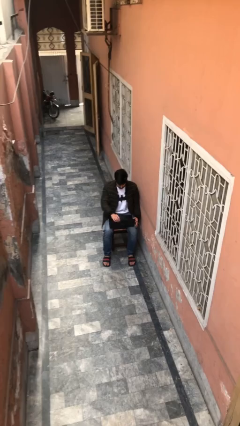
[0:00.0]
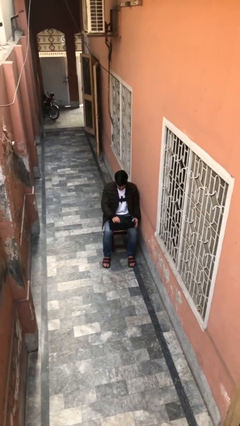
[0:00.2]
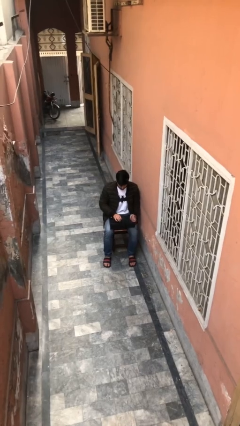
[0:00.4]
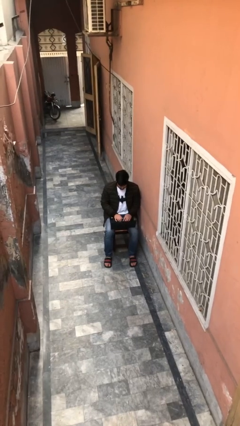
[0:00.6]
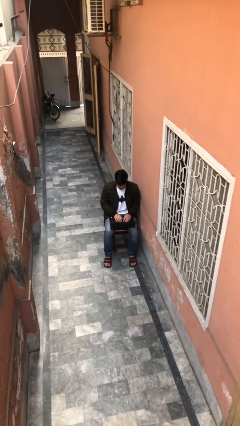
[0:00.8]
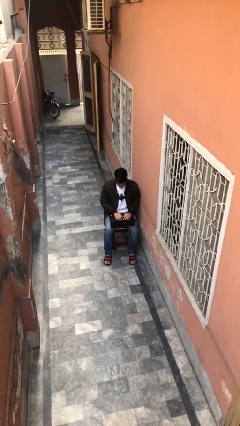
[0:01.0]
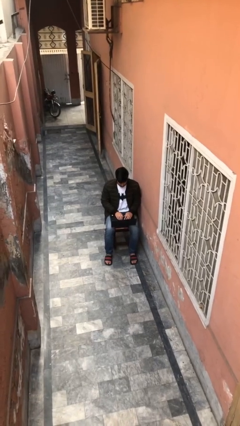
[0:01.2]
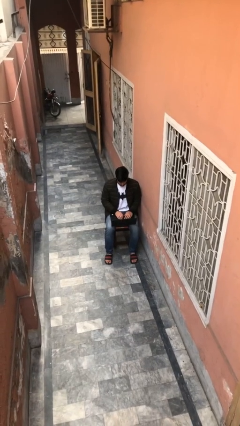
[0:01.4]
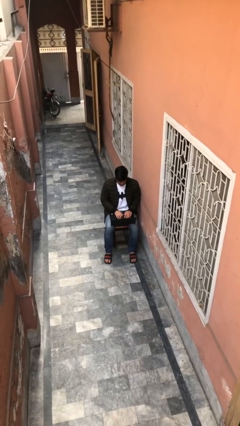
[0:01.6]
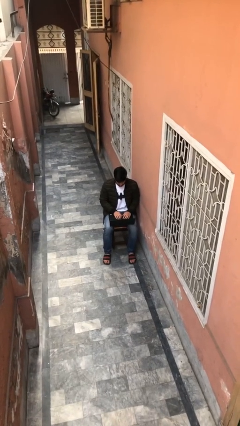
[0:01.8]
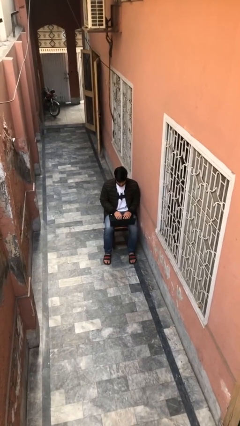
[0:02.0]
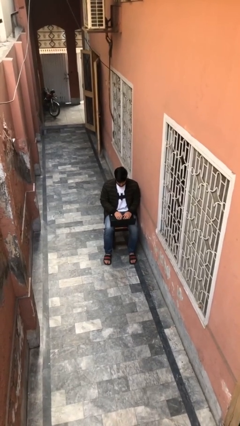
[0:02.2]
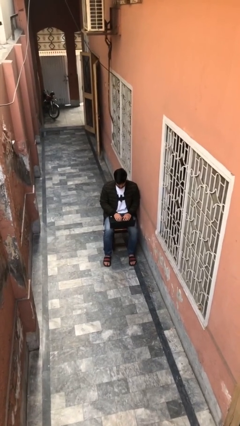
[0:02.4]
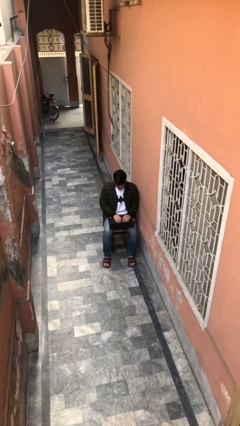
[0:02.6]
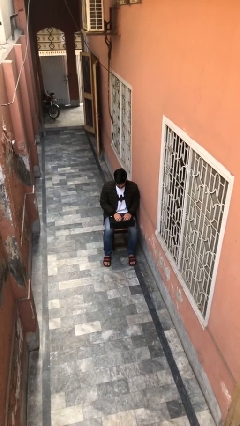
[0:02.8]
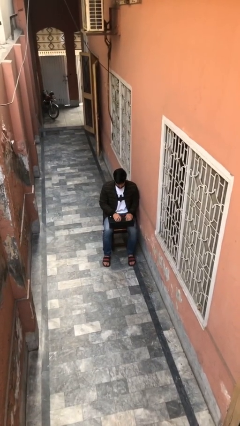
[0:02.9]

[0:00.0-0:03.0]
person interacts with laptop

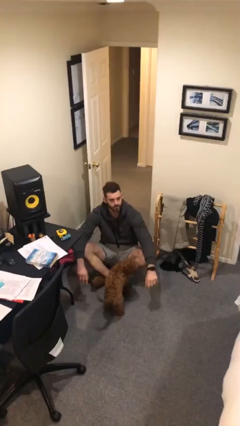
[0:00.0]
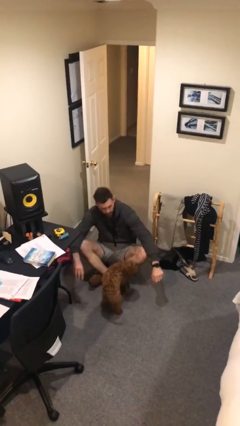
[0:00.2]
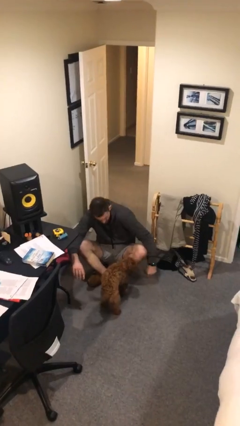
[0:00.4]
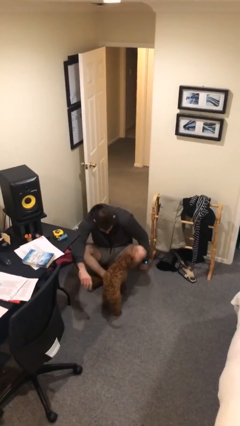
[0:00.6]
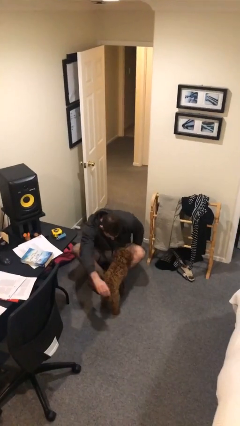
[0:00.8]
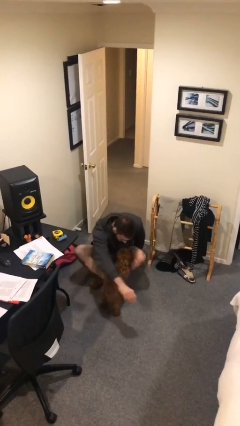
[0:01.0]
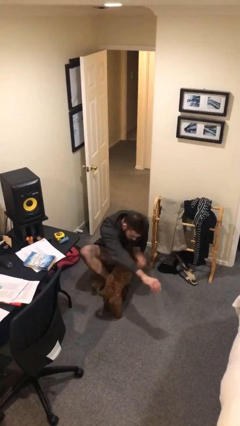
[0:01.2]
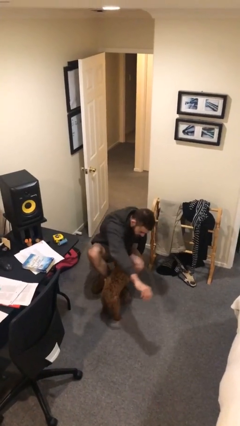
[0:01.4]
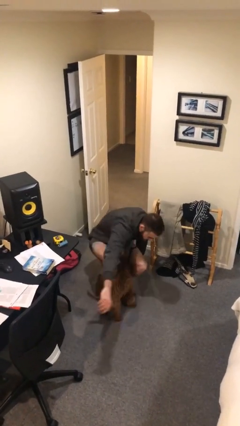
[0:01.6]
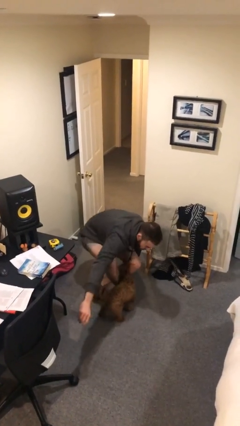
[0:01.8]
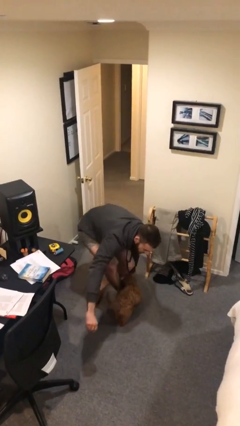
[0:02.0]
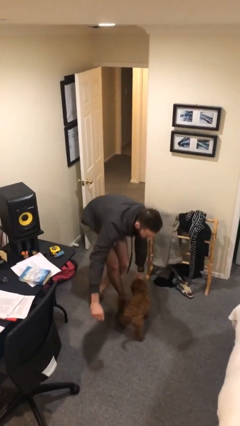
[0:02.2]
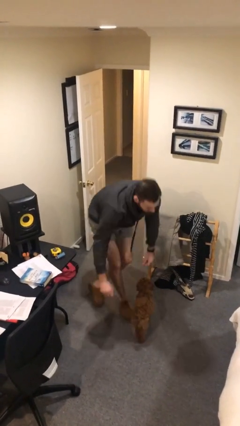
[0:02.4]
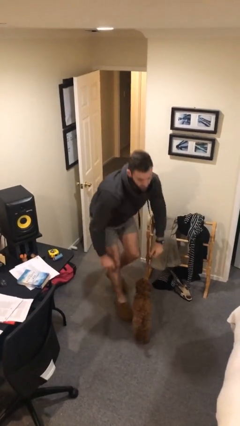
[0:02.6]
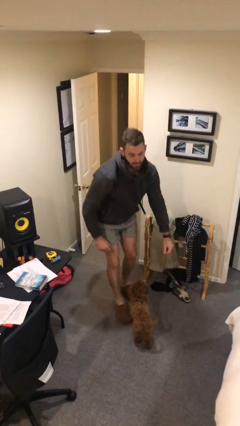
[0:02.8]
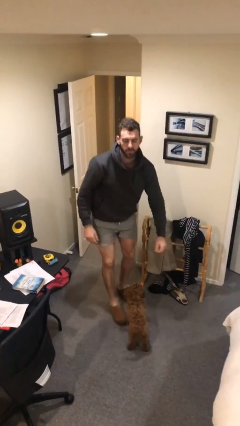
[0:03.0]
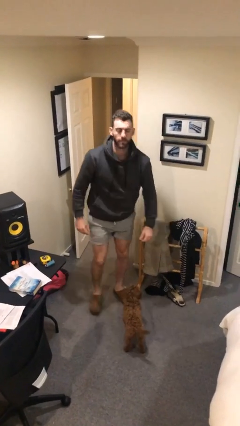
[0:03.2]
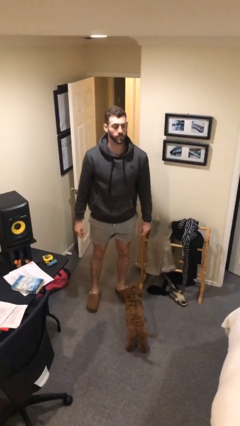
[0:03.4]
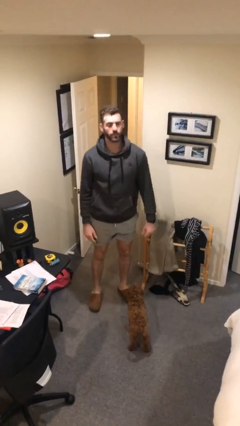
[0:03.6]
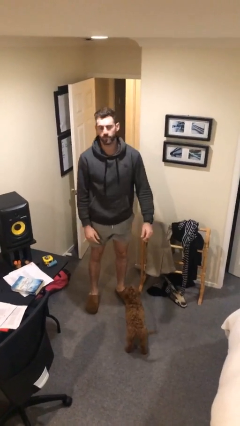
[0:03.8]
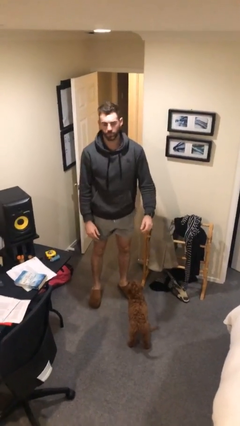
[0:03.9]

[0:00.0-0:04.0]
person stands up from floor

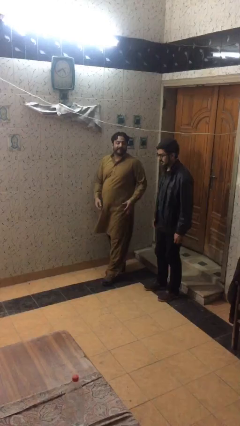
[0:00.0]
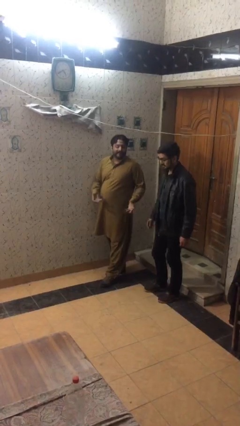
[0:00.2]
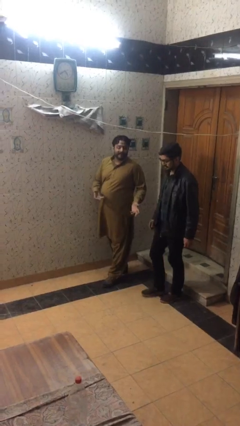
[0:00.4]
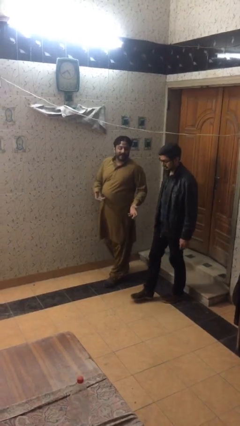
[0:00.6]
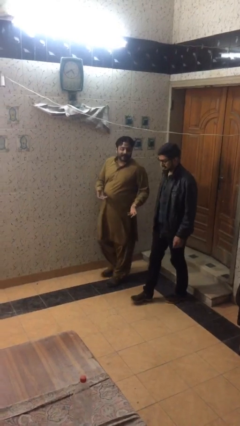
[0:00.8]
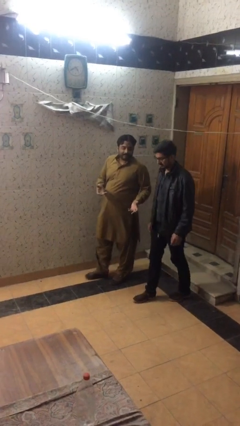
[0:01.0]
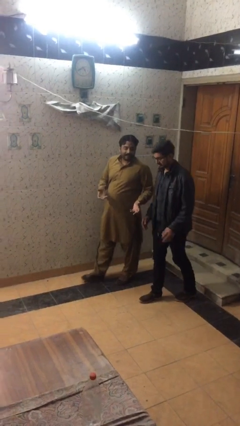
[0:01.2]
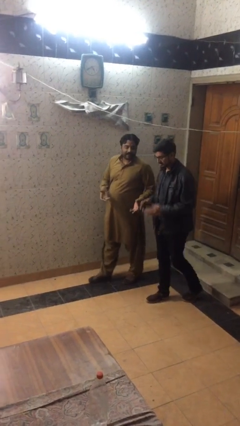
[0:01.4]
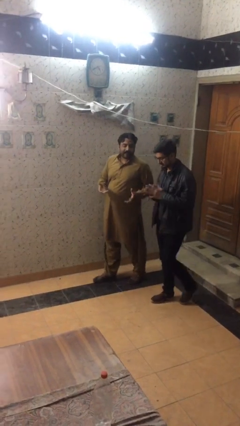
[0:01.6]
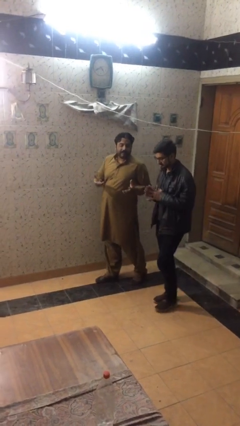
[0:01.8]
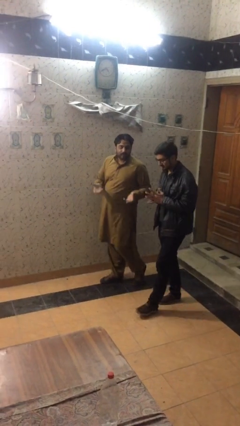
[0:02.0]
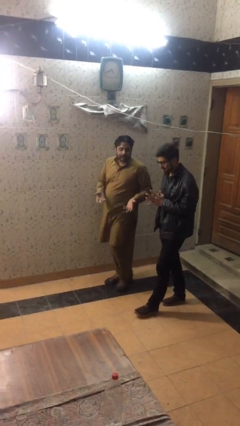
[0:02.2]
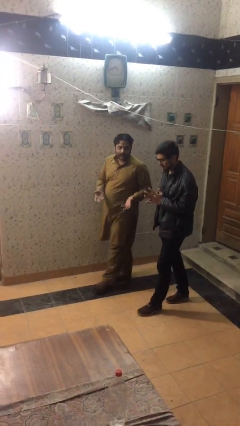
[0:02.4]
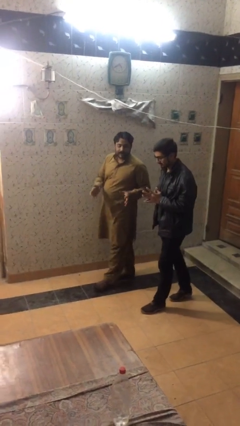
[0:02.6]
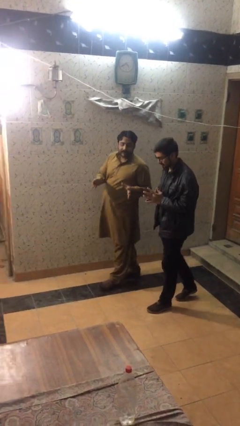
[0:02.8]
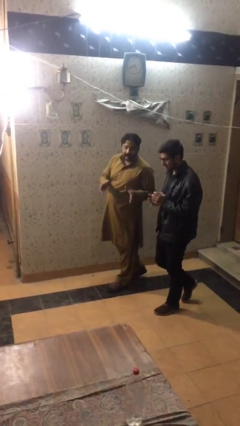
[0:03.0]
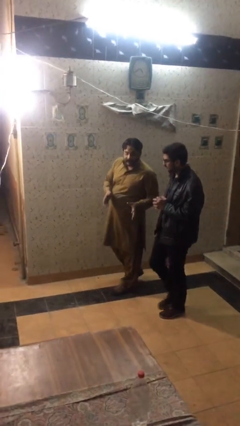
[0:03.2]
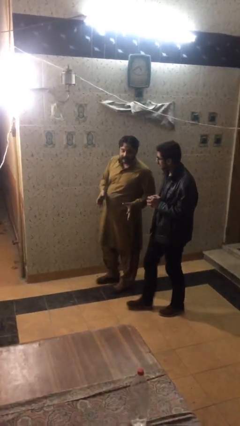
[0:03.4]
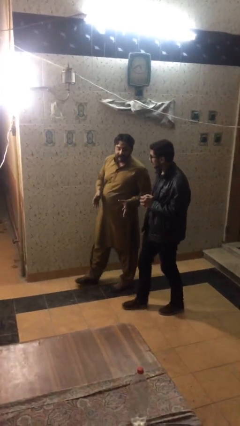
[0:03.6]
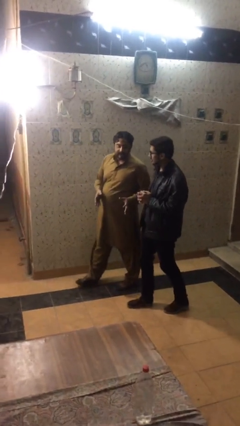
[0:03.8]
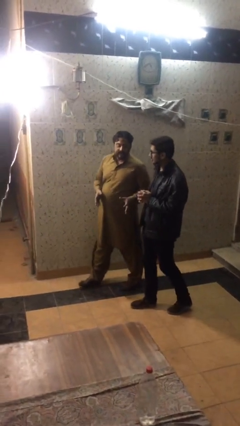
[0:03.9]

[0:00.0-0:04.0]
person talks to person

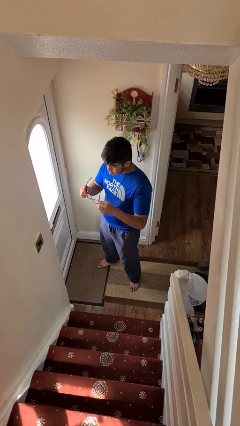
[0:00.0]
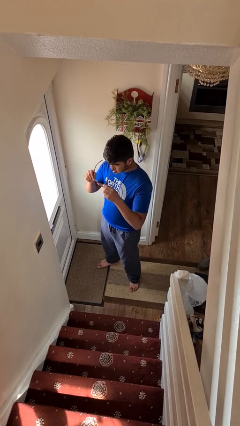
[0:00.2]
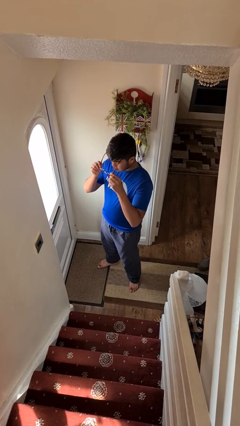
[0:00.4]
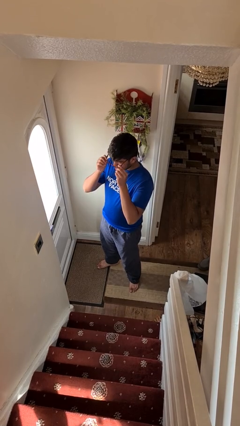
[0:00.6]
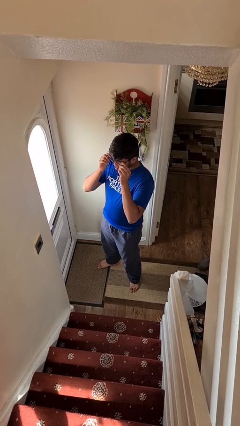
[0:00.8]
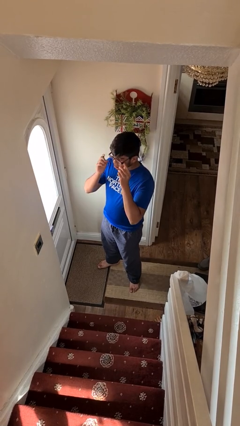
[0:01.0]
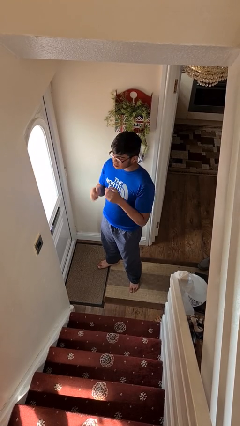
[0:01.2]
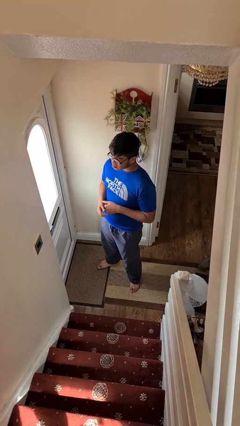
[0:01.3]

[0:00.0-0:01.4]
person puts on glasses

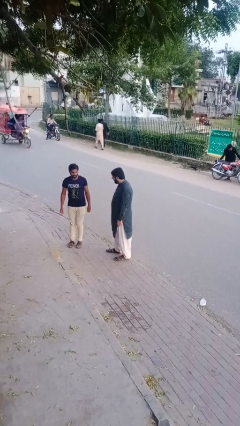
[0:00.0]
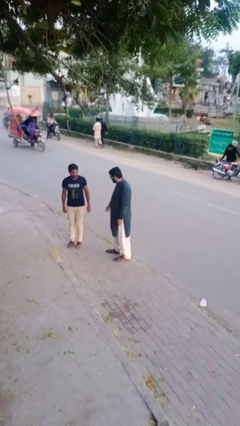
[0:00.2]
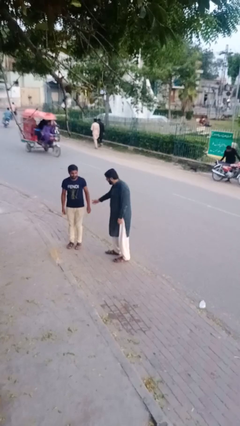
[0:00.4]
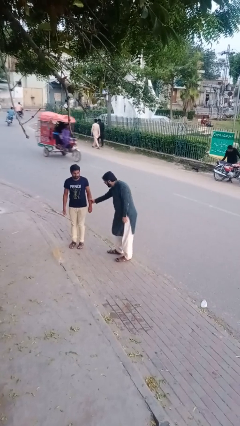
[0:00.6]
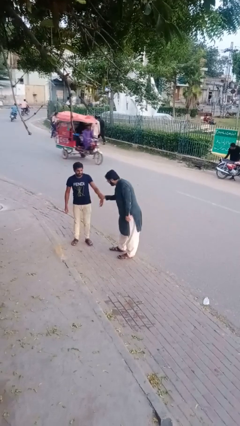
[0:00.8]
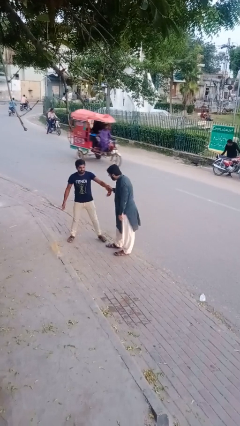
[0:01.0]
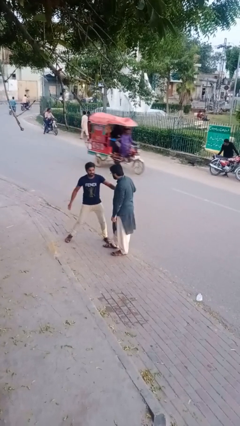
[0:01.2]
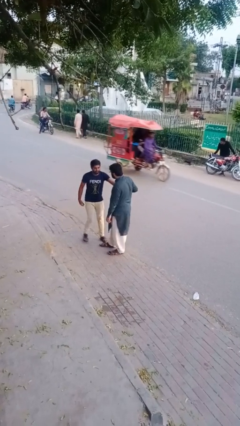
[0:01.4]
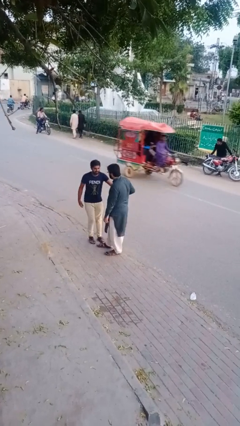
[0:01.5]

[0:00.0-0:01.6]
person grabs person by forearm

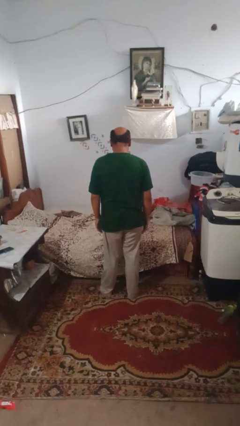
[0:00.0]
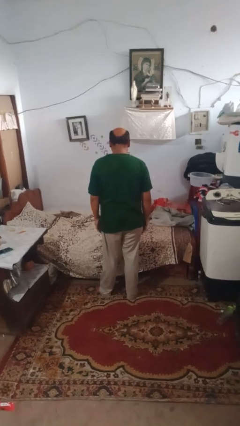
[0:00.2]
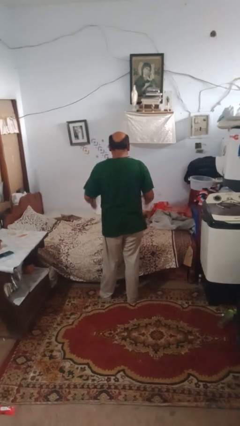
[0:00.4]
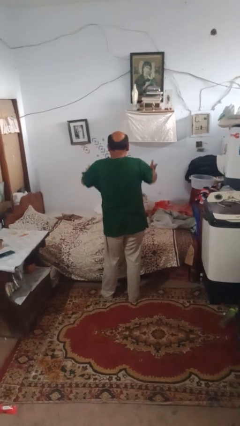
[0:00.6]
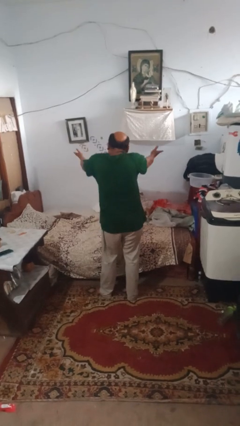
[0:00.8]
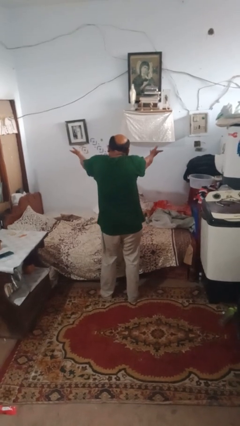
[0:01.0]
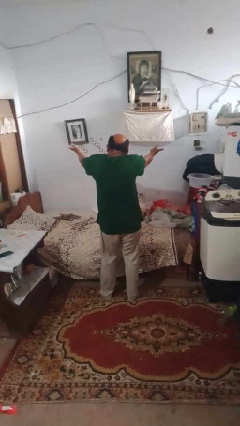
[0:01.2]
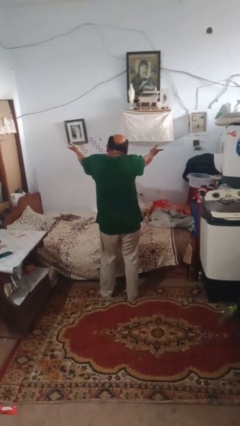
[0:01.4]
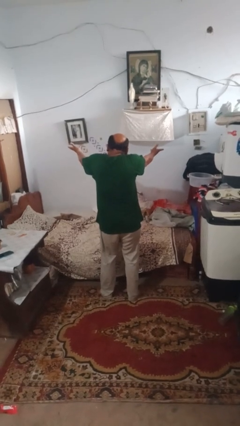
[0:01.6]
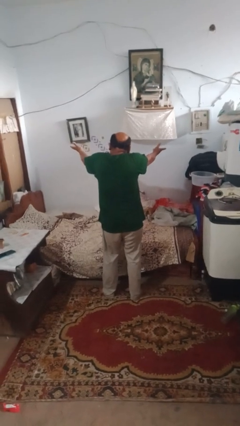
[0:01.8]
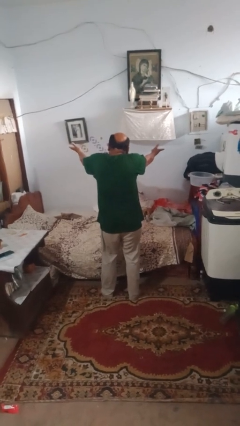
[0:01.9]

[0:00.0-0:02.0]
person shrugs

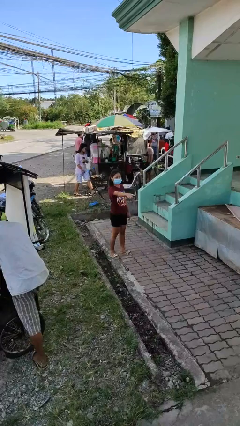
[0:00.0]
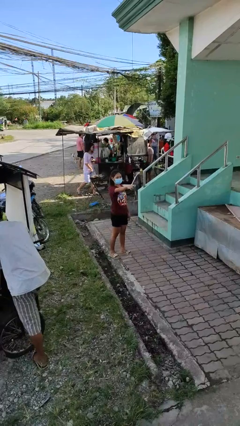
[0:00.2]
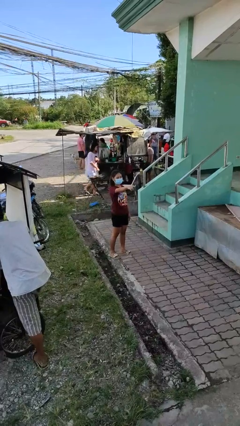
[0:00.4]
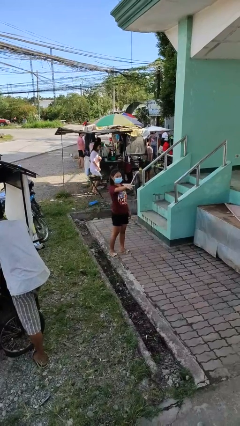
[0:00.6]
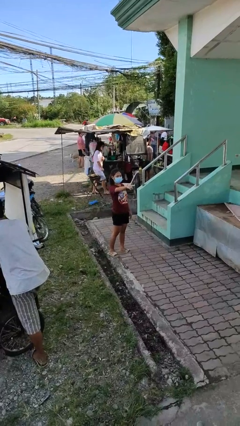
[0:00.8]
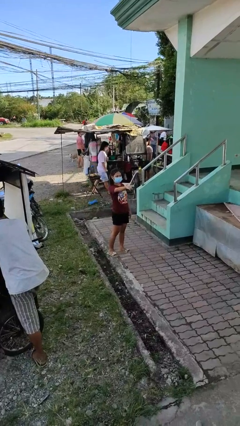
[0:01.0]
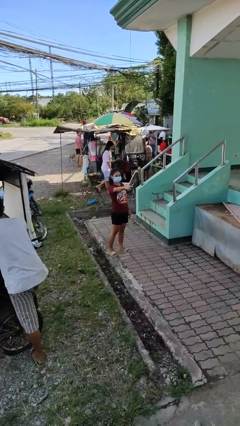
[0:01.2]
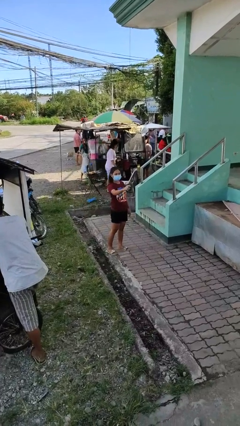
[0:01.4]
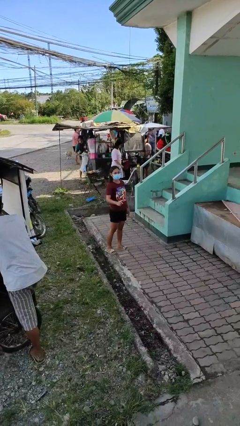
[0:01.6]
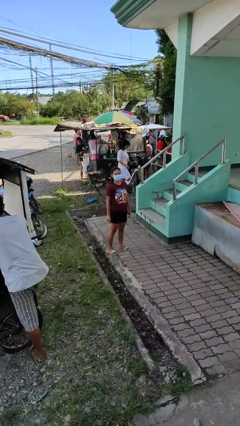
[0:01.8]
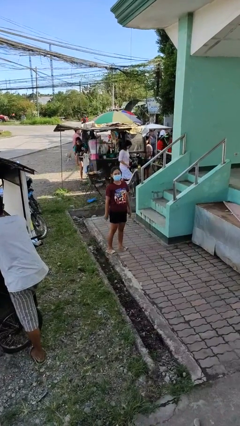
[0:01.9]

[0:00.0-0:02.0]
person points at person
